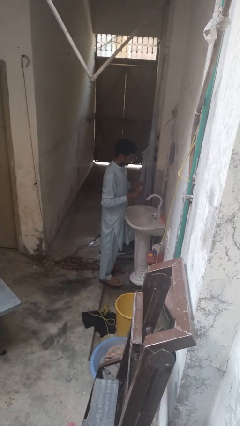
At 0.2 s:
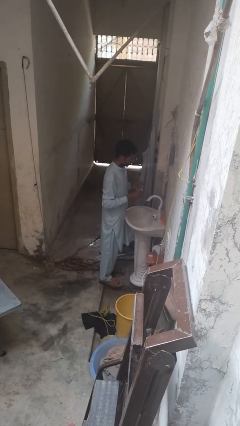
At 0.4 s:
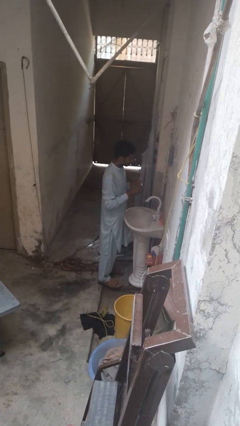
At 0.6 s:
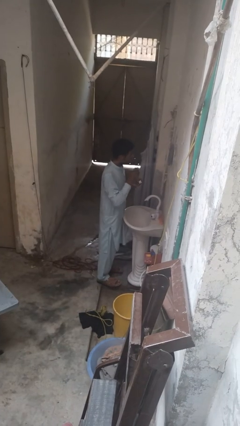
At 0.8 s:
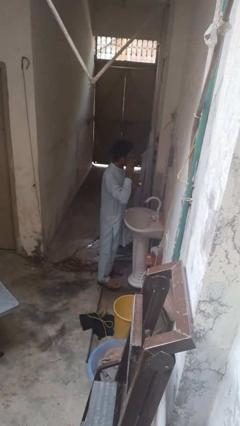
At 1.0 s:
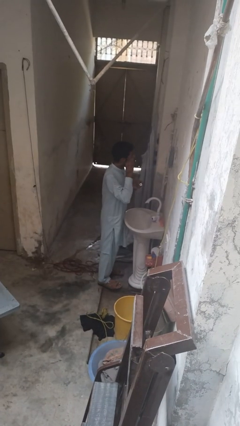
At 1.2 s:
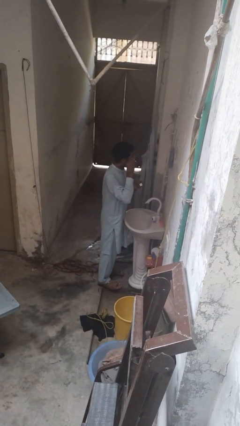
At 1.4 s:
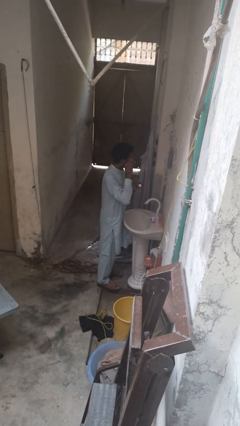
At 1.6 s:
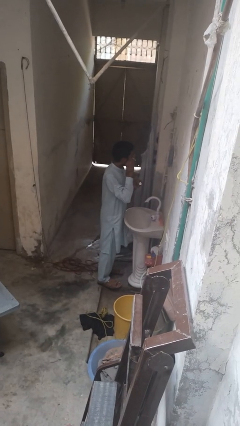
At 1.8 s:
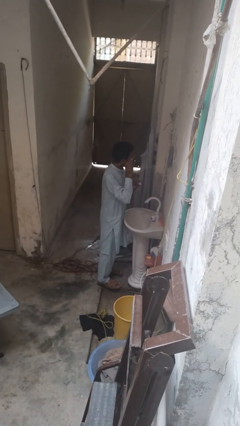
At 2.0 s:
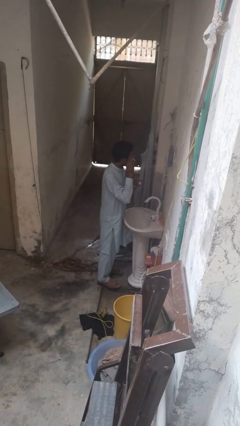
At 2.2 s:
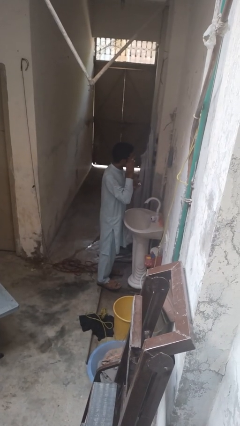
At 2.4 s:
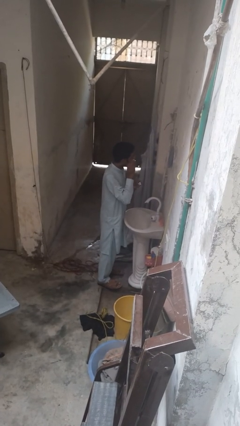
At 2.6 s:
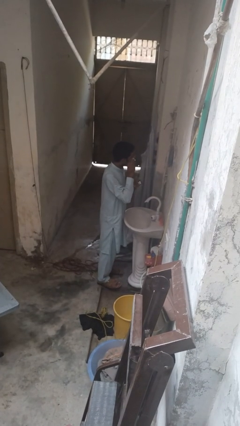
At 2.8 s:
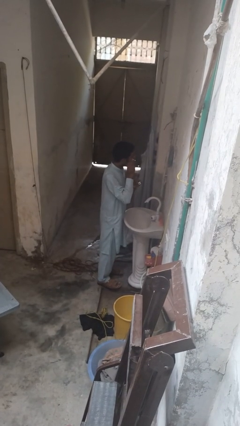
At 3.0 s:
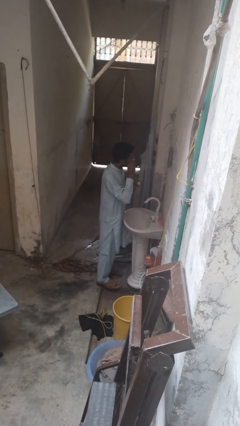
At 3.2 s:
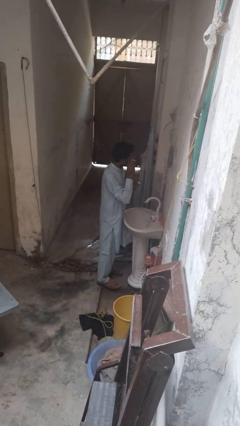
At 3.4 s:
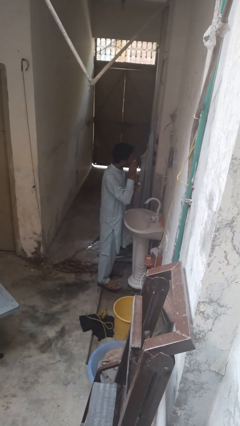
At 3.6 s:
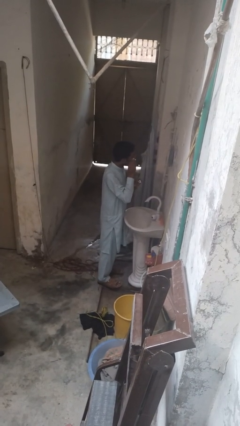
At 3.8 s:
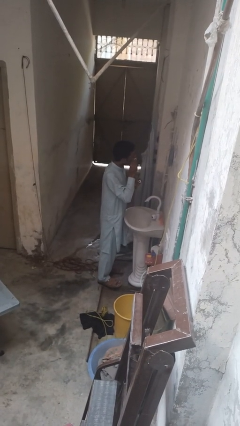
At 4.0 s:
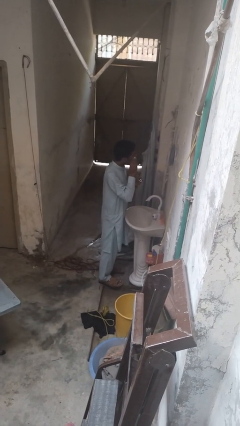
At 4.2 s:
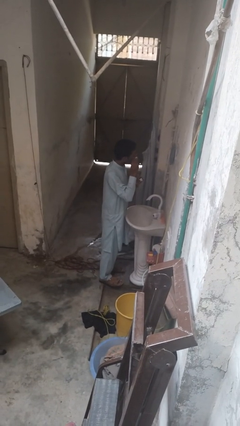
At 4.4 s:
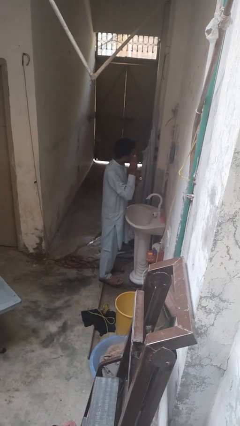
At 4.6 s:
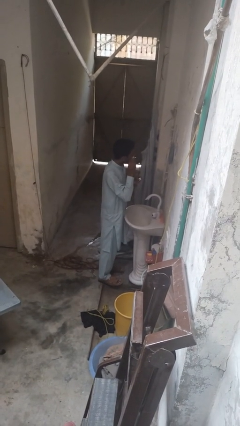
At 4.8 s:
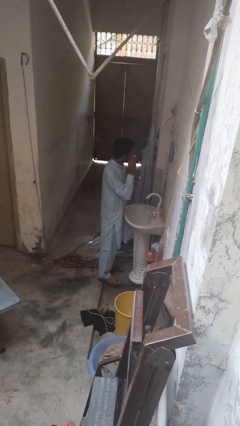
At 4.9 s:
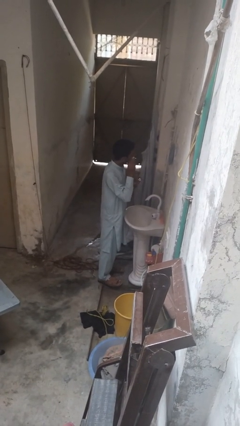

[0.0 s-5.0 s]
person applies eye makeup

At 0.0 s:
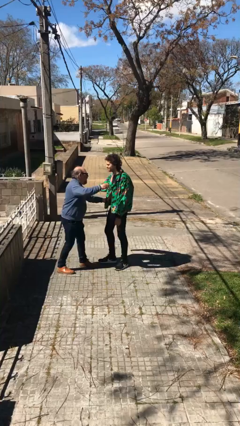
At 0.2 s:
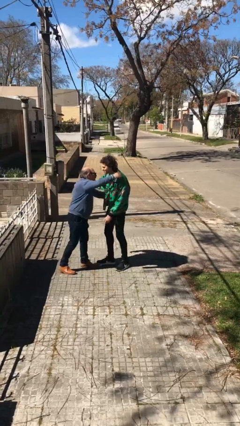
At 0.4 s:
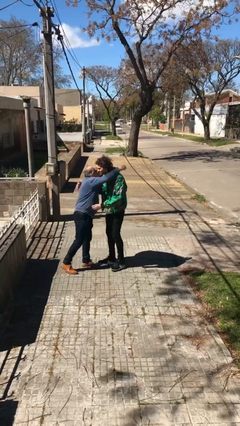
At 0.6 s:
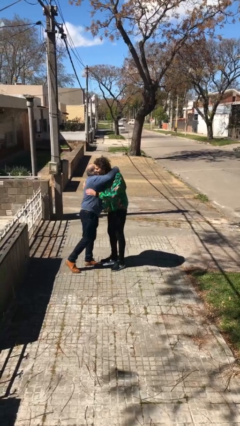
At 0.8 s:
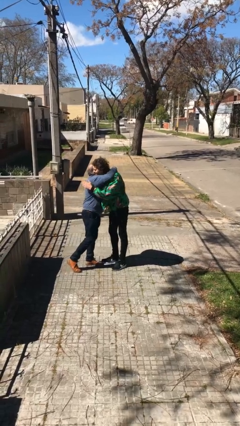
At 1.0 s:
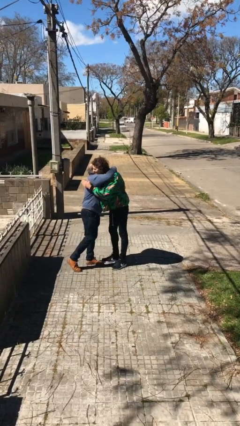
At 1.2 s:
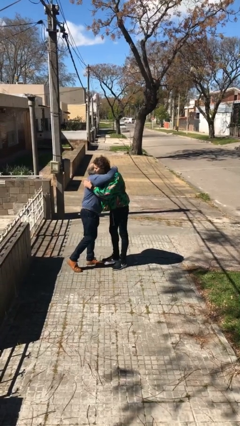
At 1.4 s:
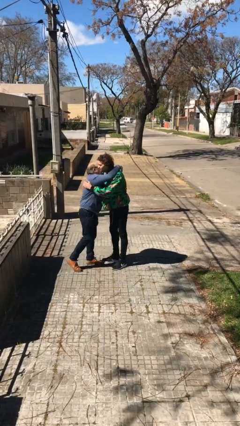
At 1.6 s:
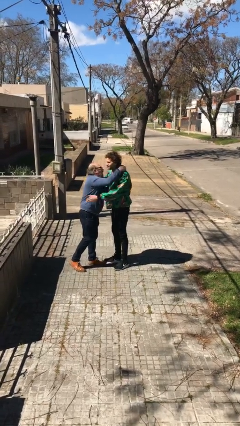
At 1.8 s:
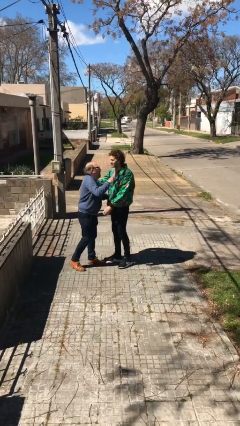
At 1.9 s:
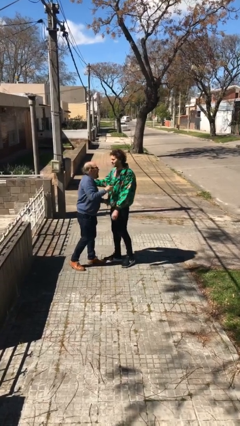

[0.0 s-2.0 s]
person embraces person

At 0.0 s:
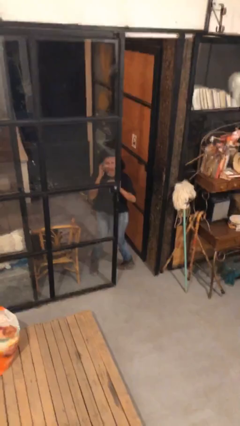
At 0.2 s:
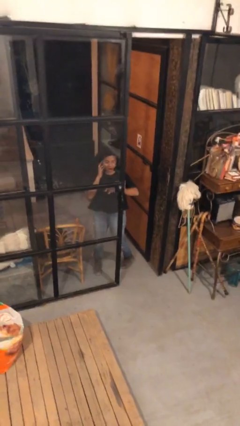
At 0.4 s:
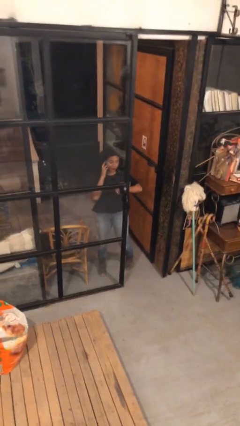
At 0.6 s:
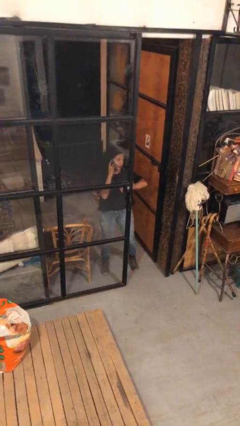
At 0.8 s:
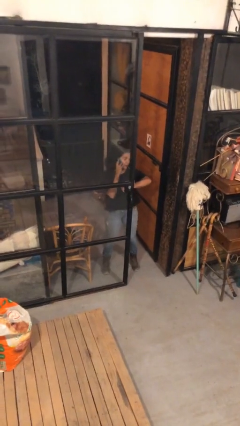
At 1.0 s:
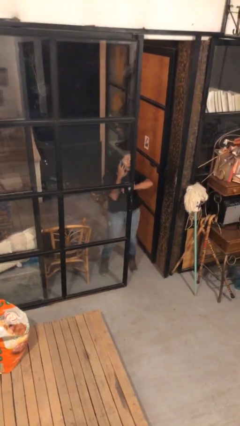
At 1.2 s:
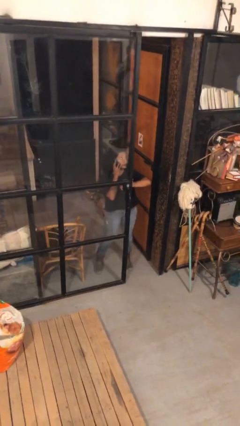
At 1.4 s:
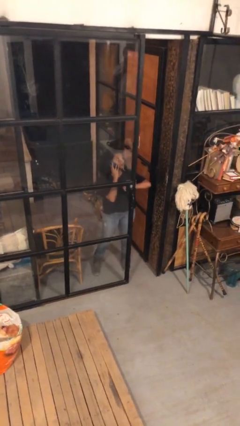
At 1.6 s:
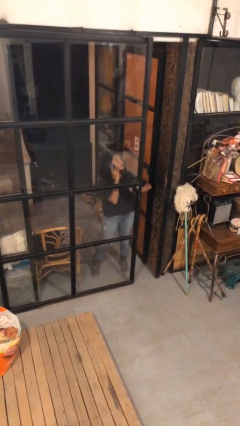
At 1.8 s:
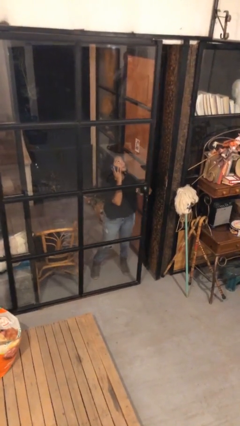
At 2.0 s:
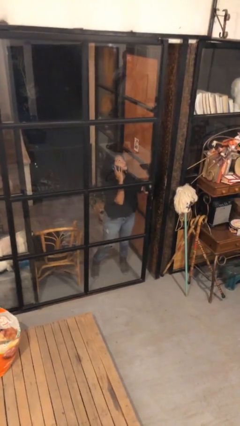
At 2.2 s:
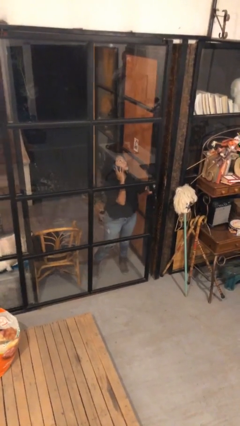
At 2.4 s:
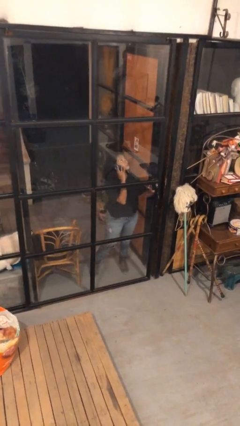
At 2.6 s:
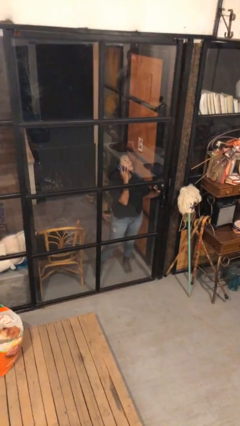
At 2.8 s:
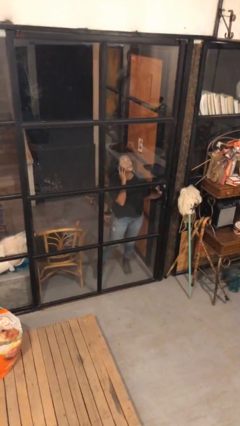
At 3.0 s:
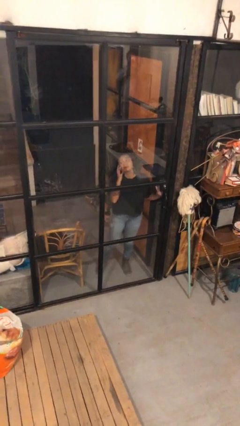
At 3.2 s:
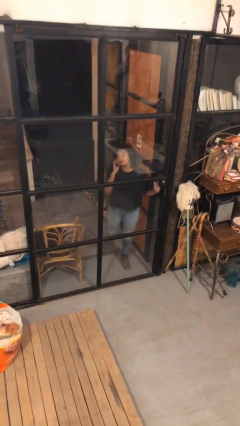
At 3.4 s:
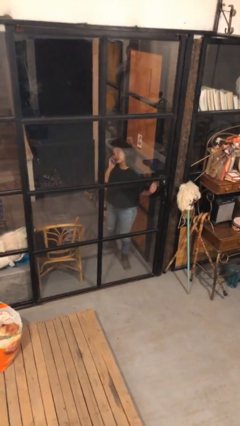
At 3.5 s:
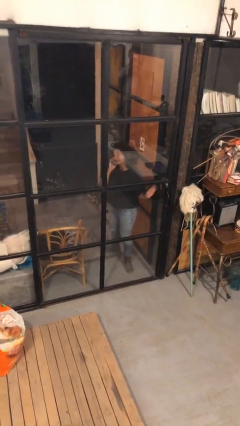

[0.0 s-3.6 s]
person closes facility door

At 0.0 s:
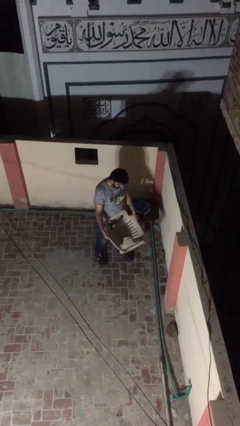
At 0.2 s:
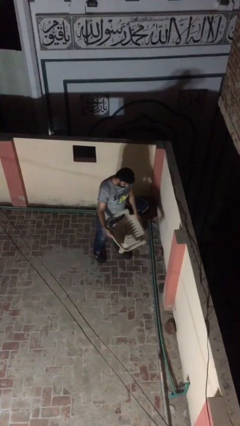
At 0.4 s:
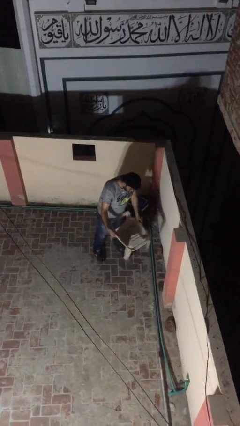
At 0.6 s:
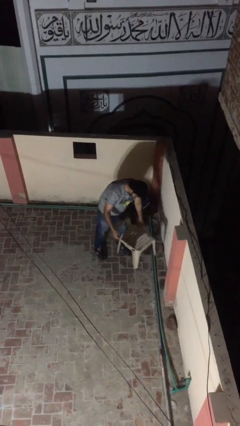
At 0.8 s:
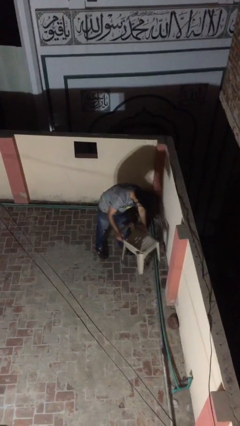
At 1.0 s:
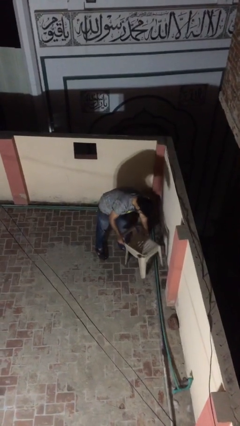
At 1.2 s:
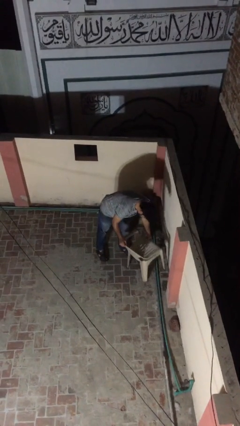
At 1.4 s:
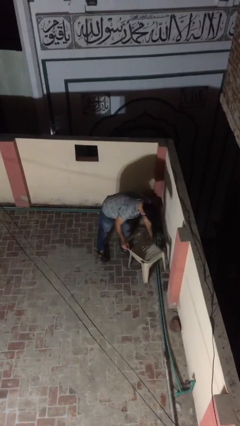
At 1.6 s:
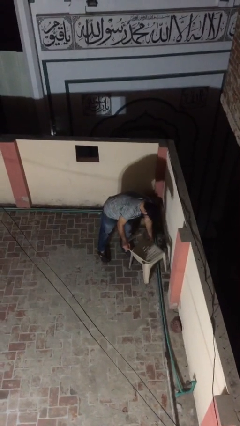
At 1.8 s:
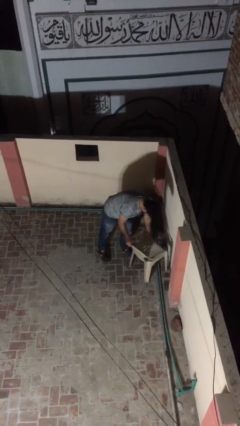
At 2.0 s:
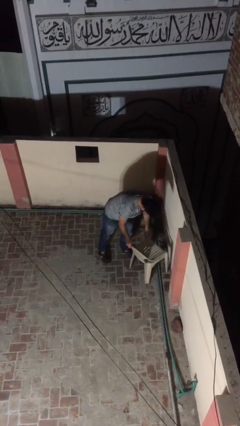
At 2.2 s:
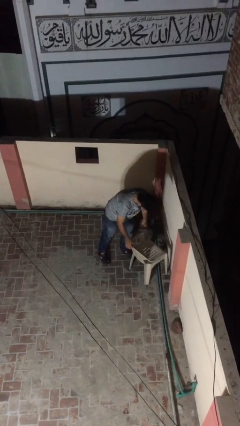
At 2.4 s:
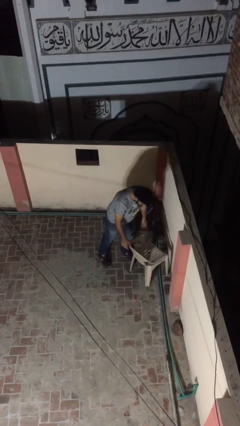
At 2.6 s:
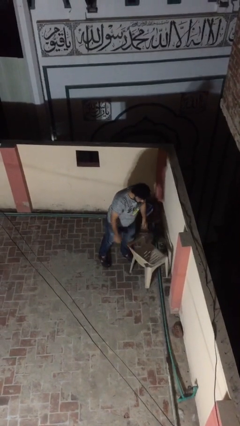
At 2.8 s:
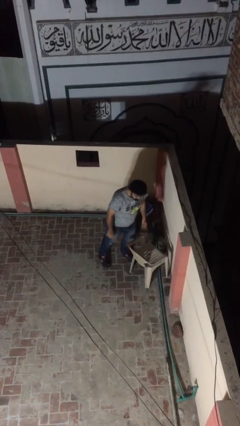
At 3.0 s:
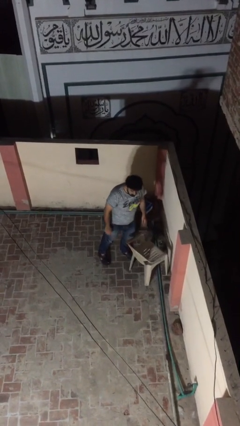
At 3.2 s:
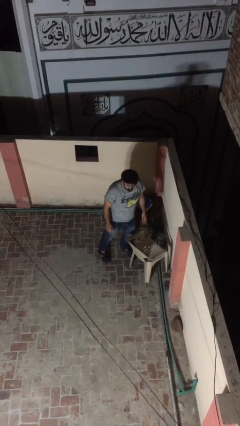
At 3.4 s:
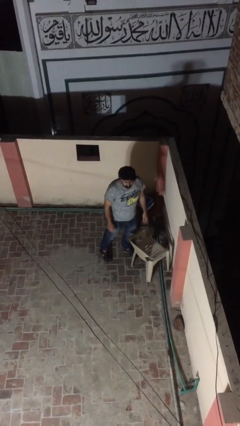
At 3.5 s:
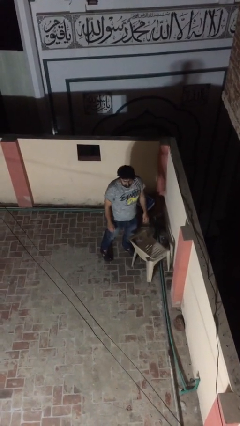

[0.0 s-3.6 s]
person puts down object on floor

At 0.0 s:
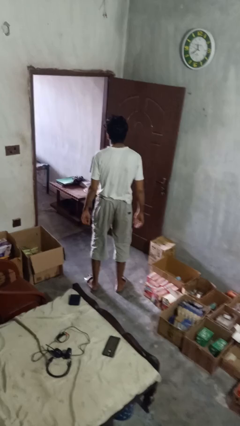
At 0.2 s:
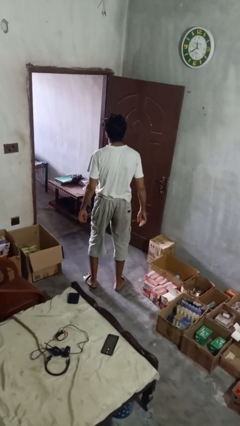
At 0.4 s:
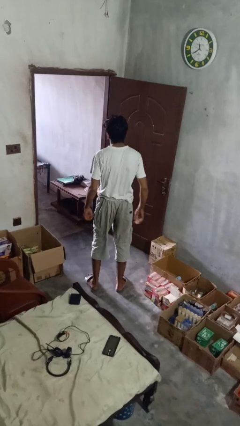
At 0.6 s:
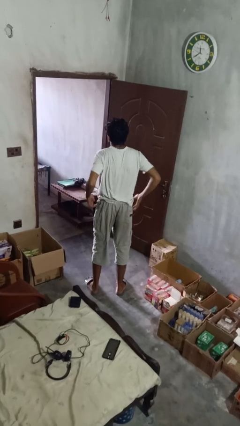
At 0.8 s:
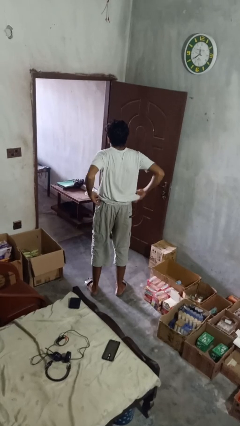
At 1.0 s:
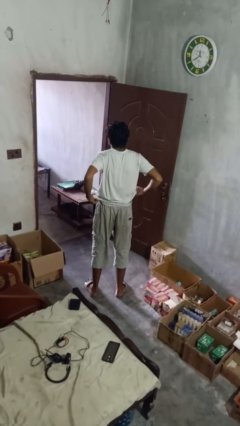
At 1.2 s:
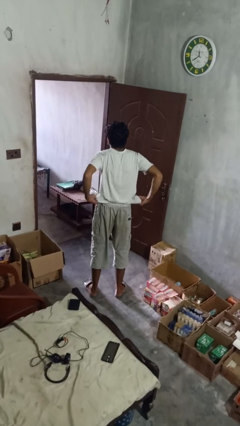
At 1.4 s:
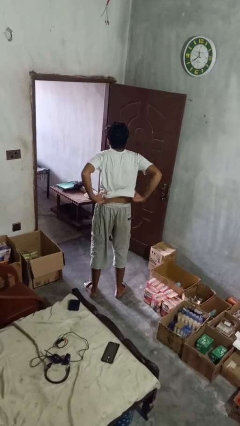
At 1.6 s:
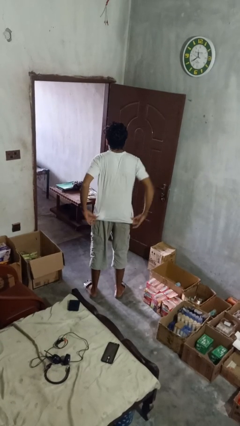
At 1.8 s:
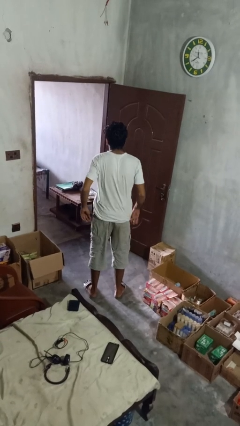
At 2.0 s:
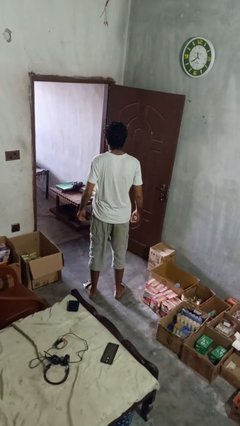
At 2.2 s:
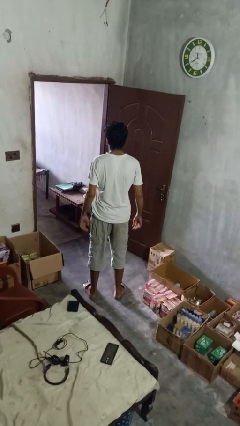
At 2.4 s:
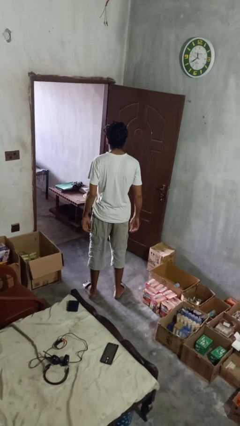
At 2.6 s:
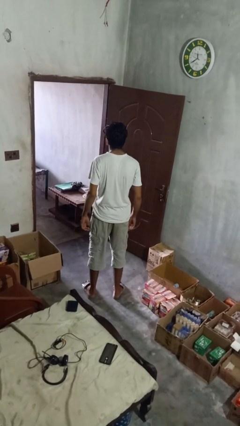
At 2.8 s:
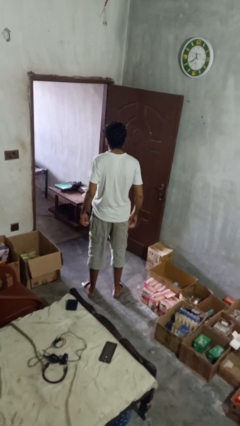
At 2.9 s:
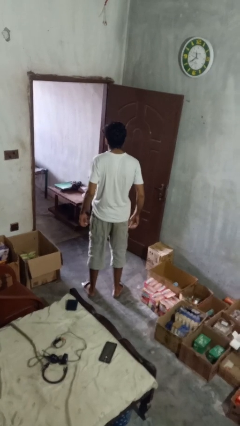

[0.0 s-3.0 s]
person untucks shirt

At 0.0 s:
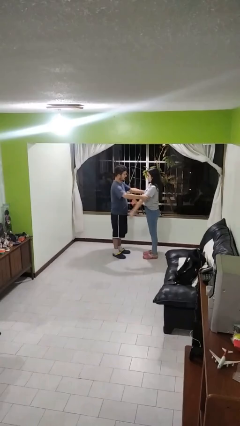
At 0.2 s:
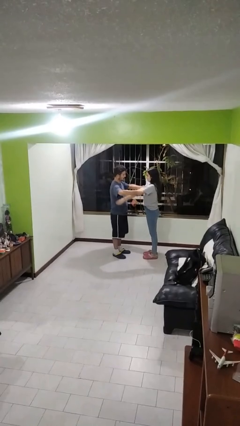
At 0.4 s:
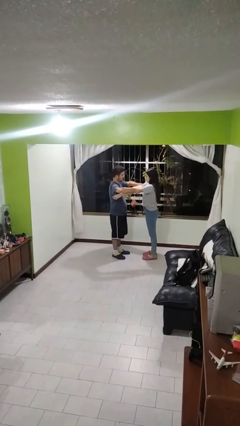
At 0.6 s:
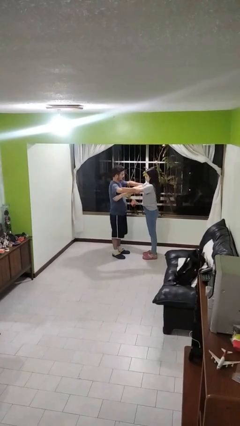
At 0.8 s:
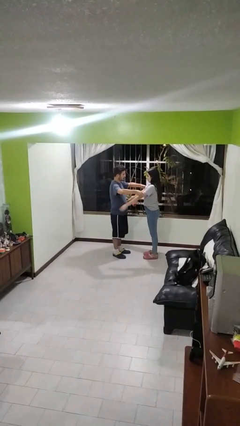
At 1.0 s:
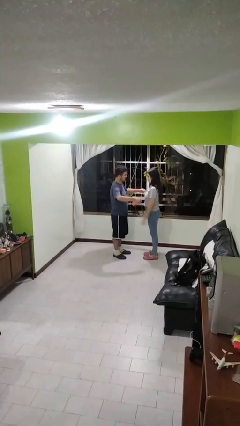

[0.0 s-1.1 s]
person grabs person by bicep
